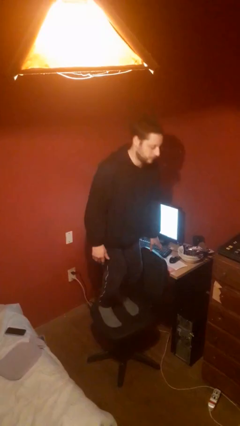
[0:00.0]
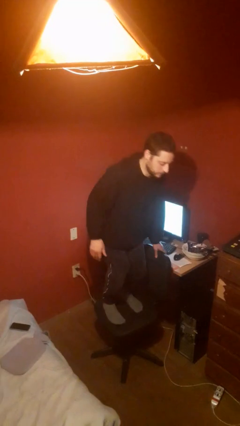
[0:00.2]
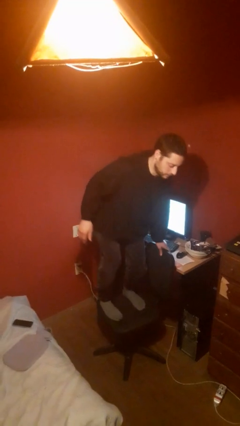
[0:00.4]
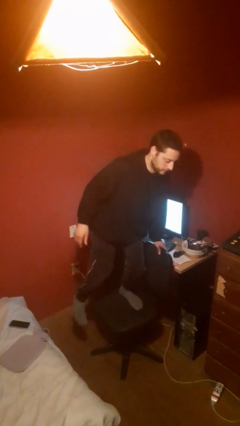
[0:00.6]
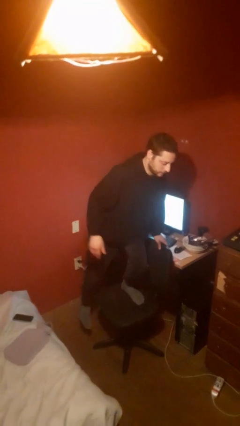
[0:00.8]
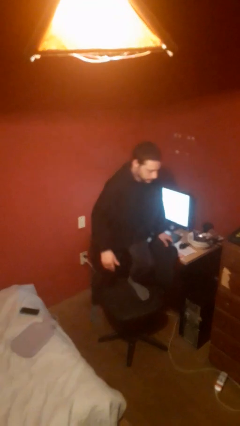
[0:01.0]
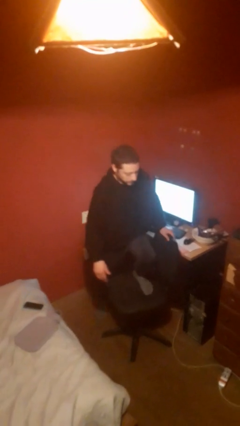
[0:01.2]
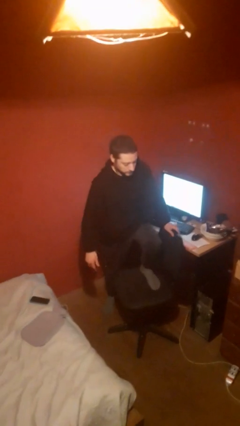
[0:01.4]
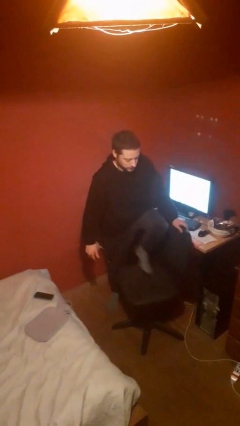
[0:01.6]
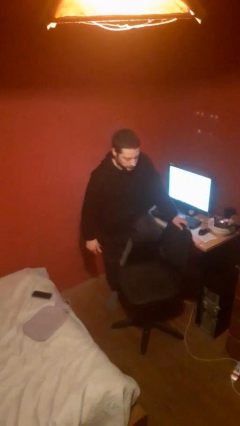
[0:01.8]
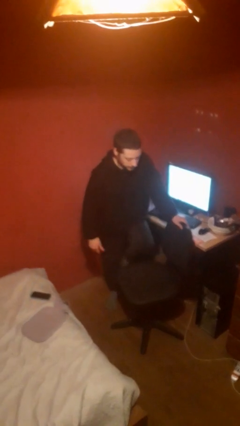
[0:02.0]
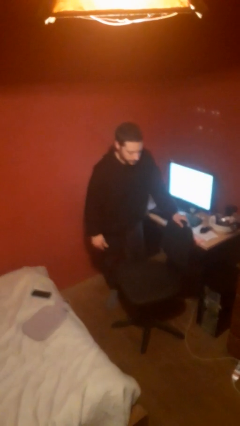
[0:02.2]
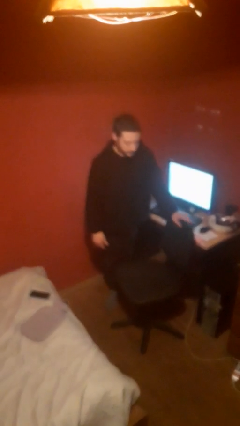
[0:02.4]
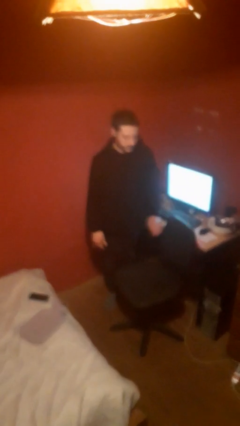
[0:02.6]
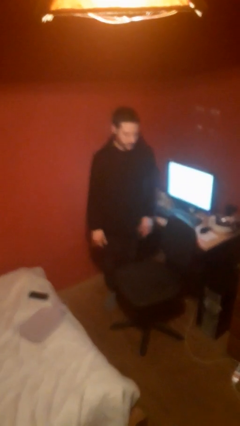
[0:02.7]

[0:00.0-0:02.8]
person climbs off chair

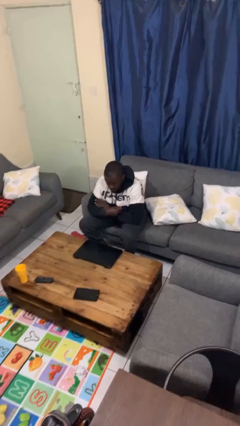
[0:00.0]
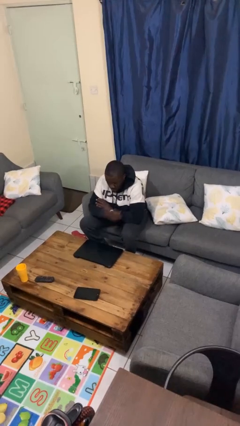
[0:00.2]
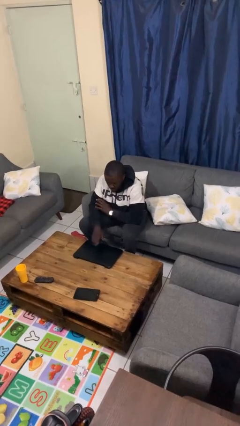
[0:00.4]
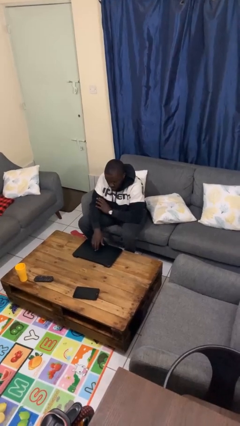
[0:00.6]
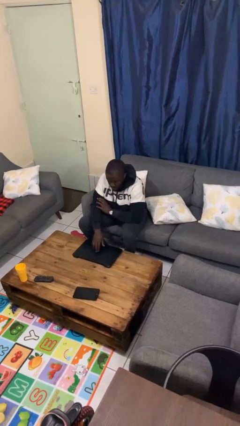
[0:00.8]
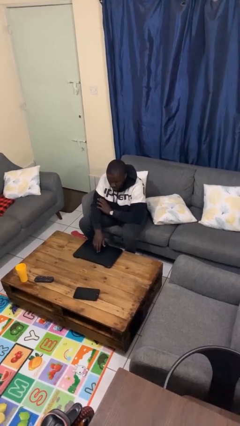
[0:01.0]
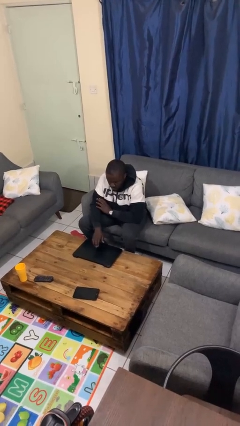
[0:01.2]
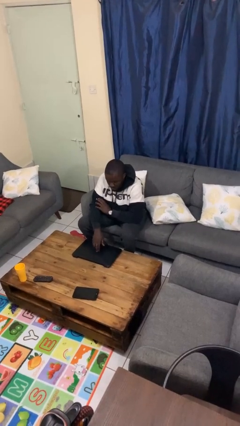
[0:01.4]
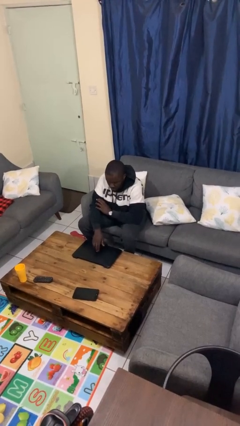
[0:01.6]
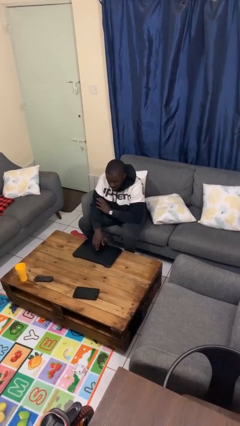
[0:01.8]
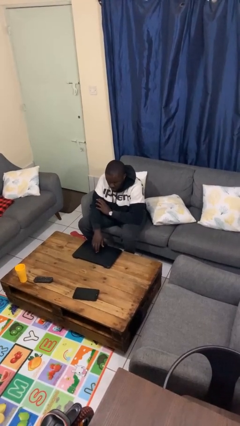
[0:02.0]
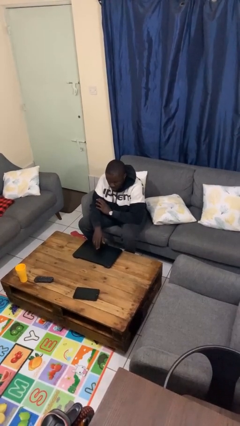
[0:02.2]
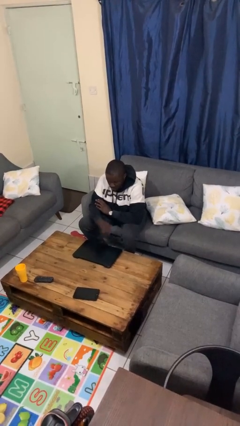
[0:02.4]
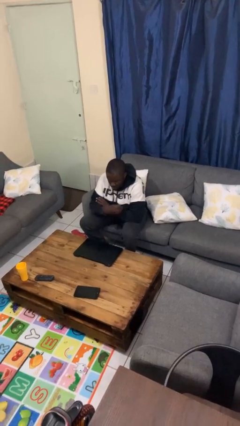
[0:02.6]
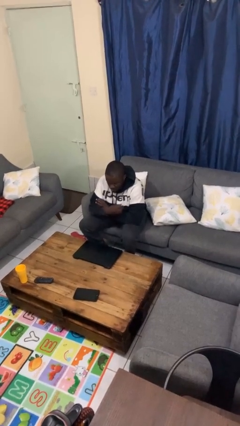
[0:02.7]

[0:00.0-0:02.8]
person taps object with finger

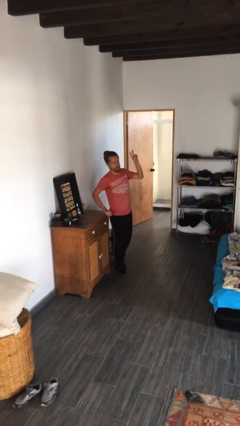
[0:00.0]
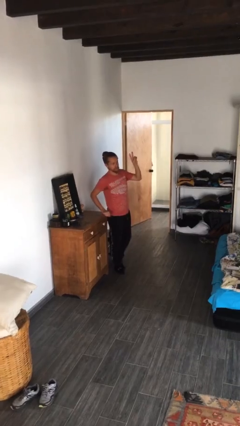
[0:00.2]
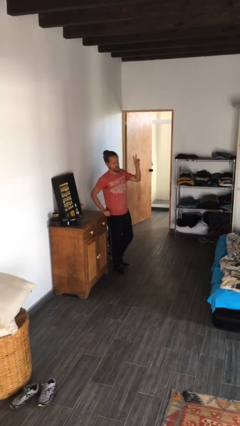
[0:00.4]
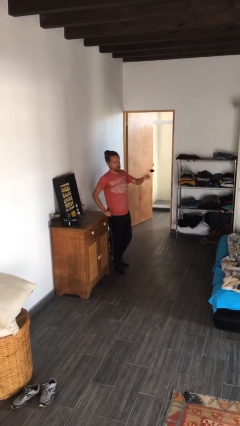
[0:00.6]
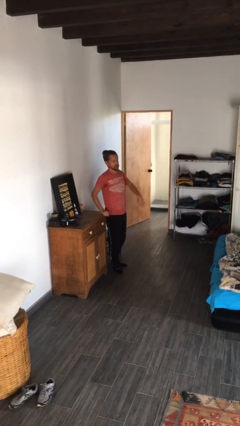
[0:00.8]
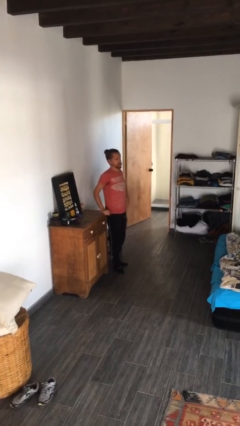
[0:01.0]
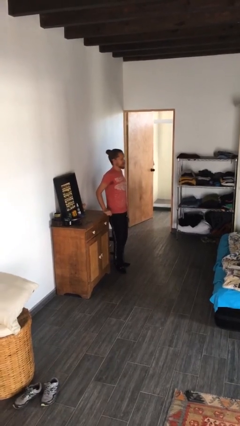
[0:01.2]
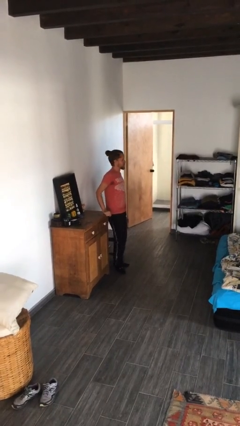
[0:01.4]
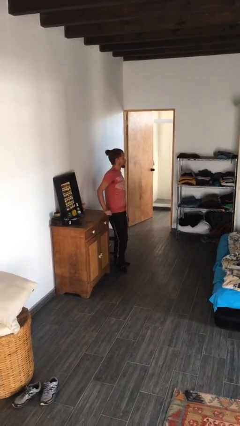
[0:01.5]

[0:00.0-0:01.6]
person gestures lower hand

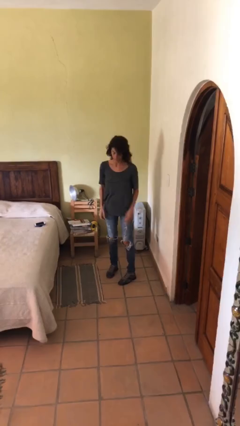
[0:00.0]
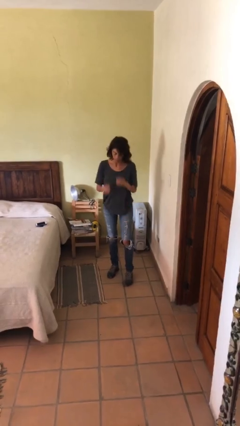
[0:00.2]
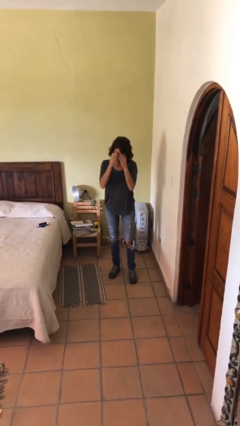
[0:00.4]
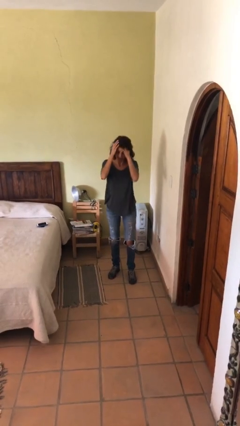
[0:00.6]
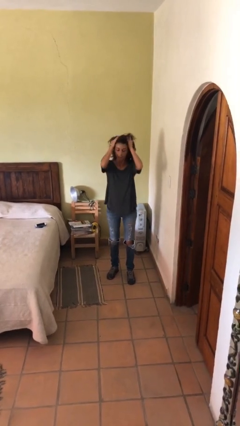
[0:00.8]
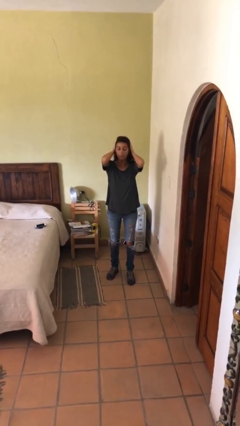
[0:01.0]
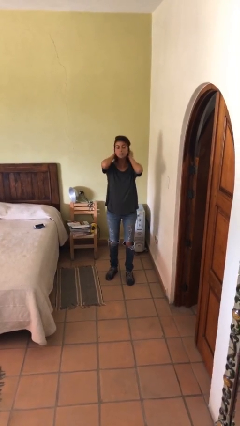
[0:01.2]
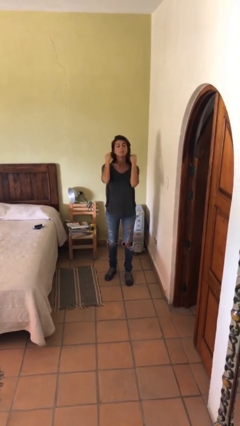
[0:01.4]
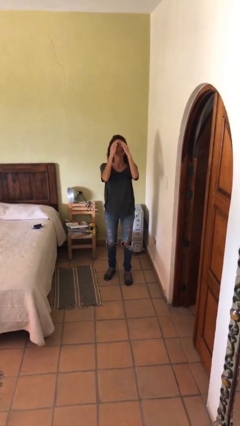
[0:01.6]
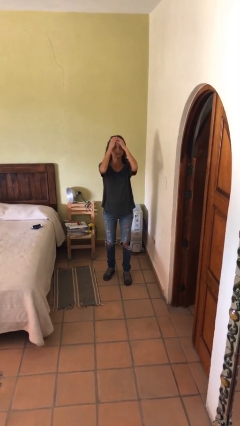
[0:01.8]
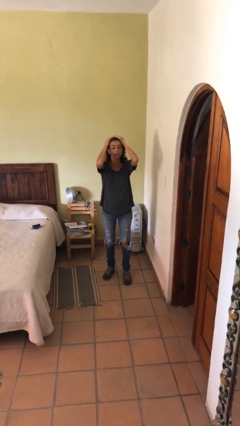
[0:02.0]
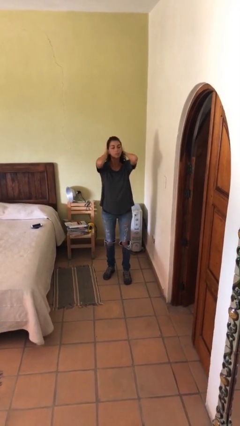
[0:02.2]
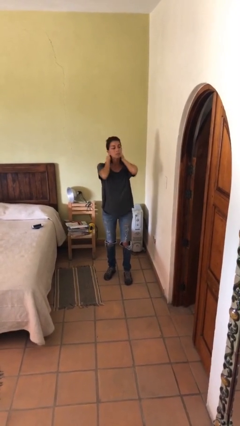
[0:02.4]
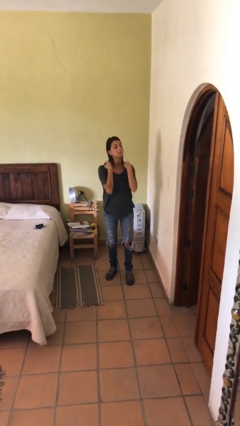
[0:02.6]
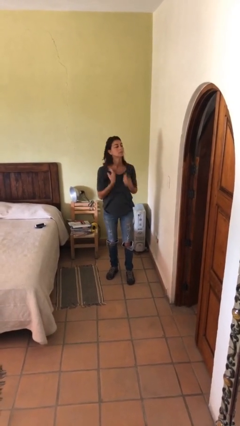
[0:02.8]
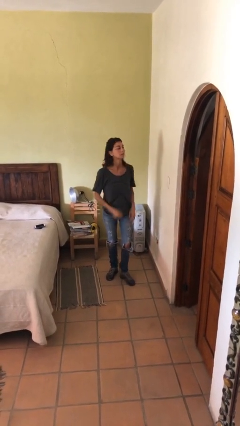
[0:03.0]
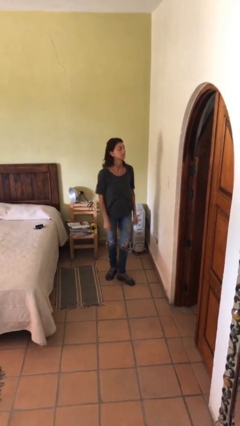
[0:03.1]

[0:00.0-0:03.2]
person strokes hair

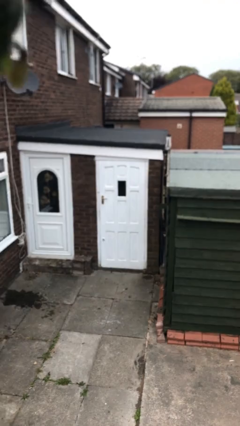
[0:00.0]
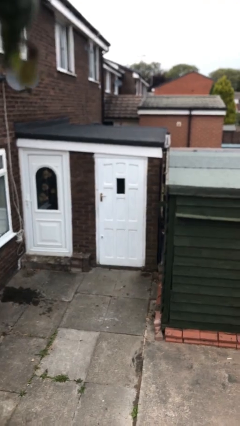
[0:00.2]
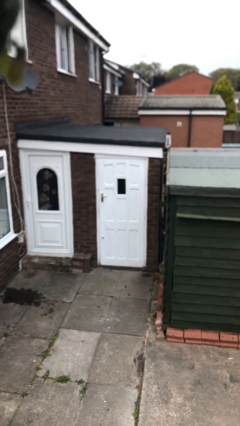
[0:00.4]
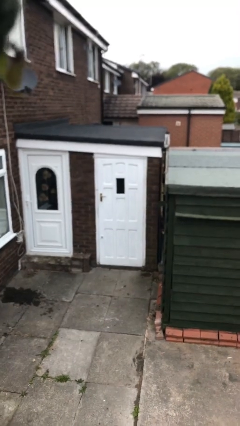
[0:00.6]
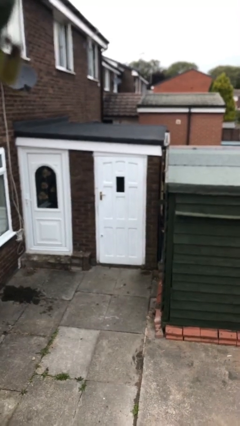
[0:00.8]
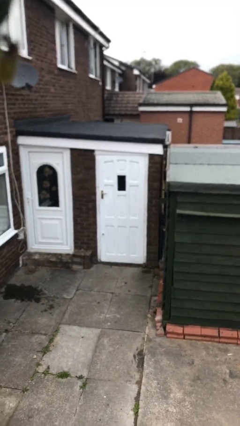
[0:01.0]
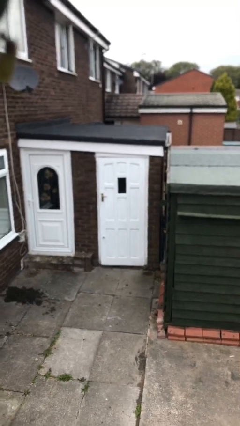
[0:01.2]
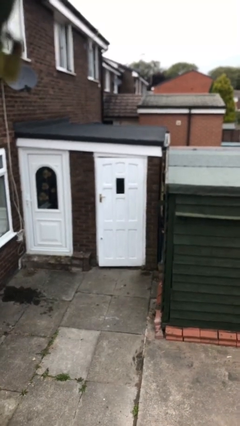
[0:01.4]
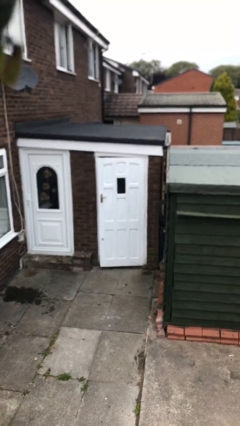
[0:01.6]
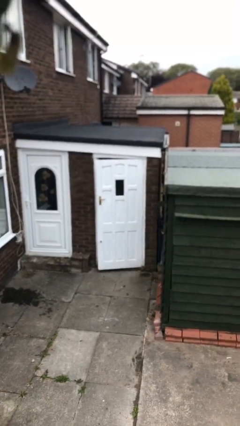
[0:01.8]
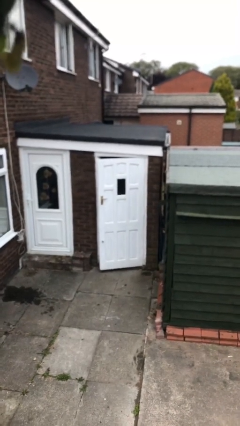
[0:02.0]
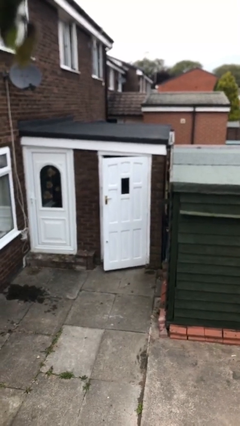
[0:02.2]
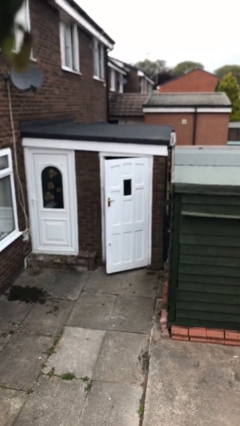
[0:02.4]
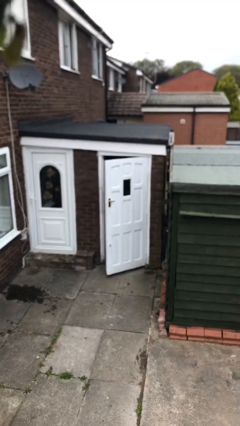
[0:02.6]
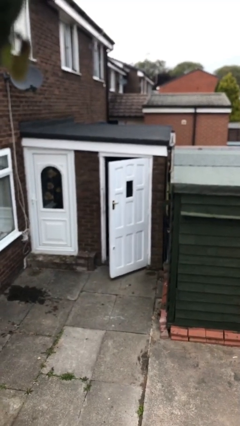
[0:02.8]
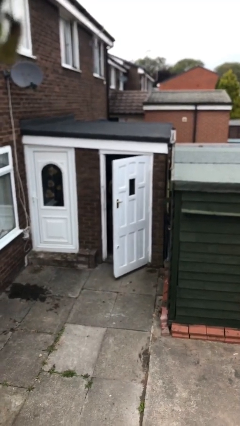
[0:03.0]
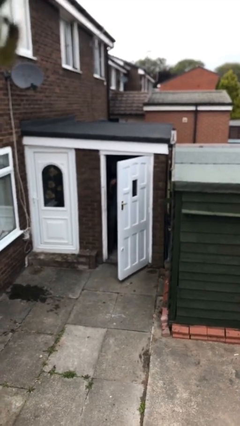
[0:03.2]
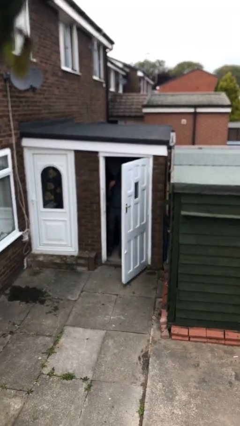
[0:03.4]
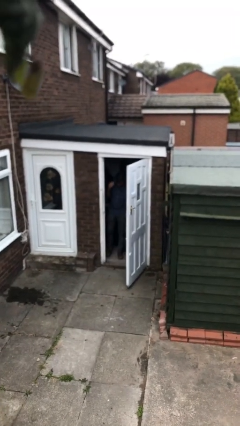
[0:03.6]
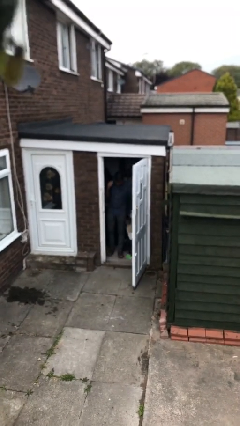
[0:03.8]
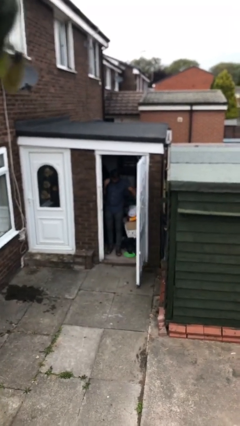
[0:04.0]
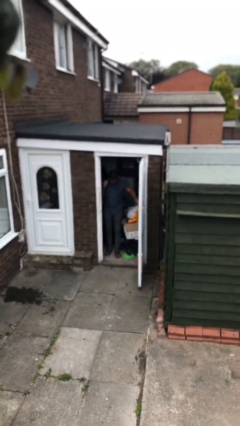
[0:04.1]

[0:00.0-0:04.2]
person opens facility door

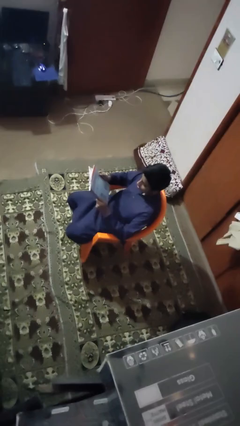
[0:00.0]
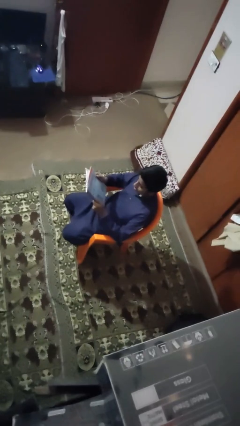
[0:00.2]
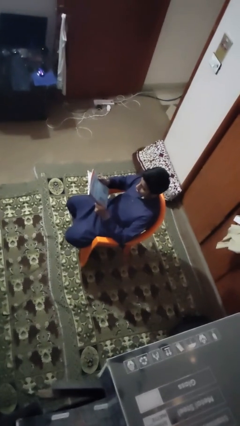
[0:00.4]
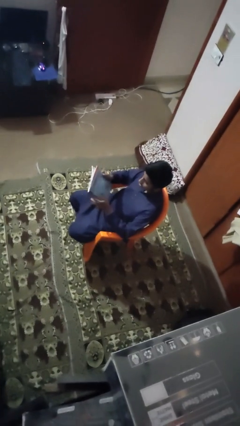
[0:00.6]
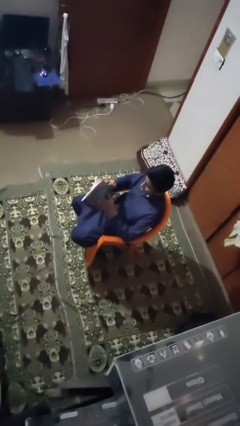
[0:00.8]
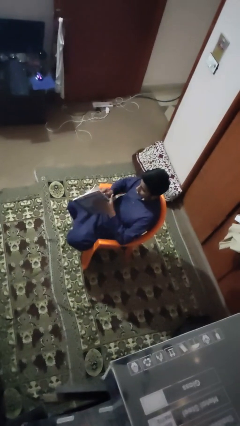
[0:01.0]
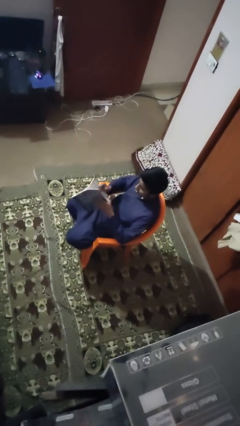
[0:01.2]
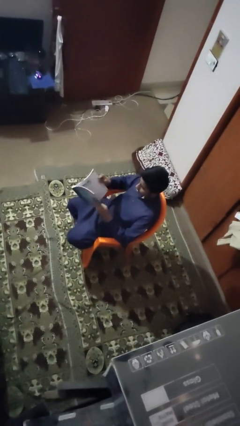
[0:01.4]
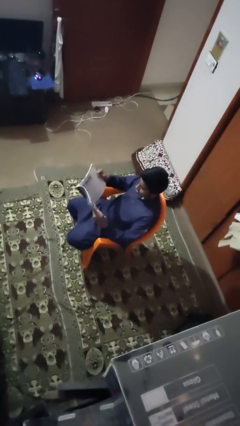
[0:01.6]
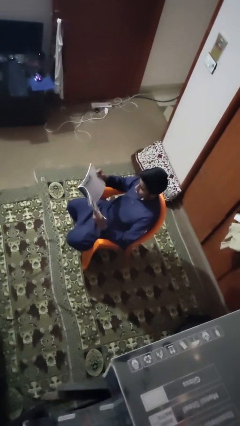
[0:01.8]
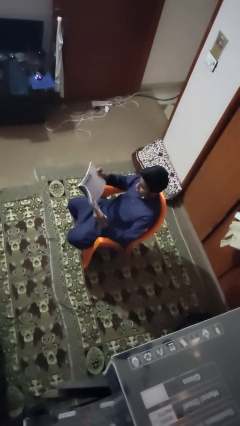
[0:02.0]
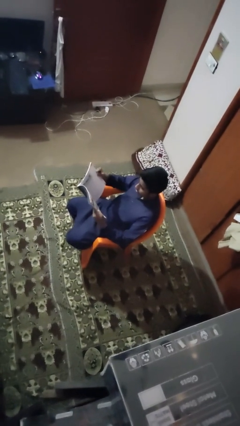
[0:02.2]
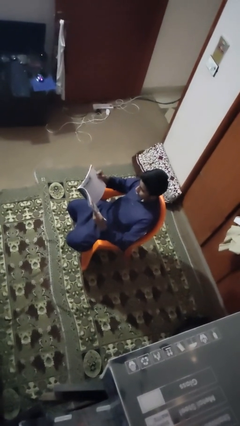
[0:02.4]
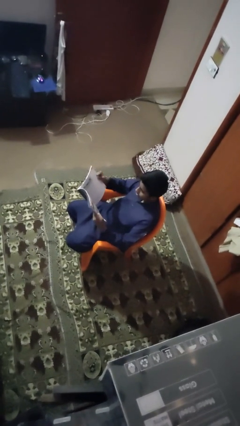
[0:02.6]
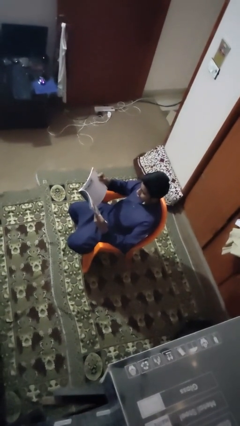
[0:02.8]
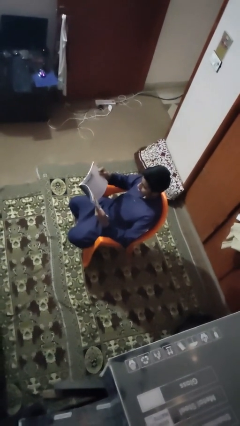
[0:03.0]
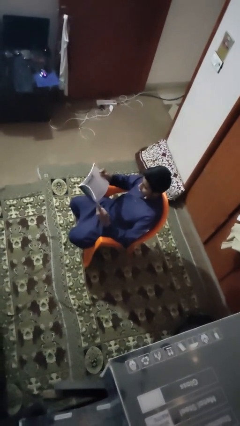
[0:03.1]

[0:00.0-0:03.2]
person reads book
